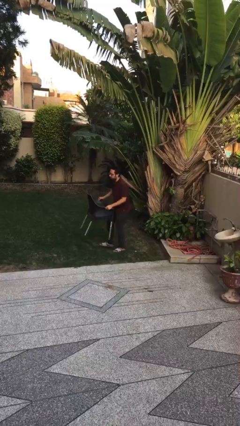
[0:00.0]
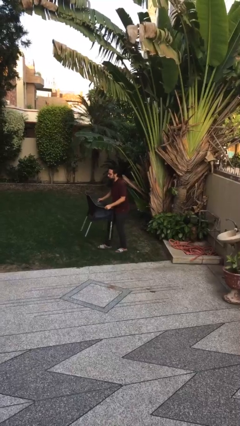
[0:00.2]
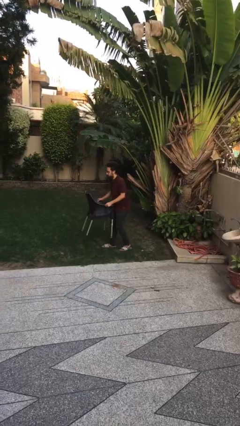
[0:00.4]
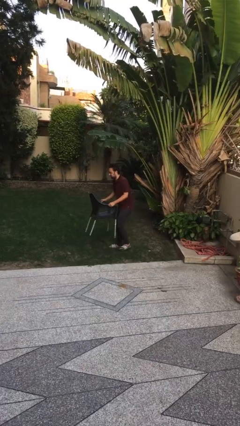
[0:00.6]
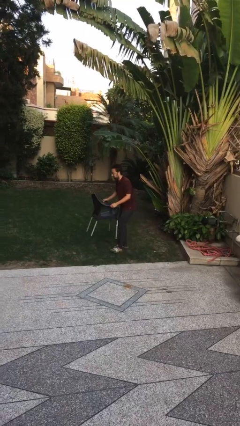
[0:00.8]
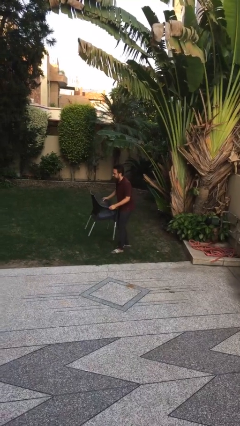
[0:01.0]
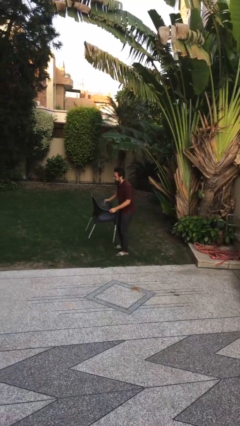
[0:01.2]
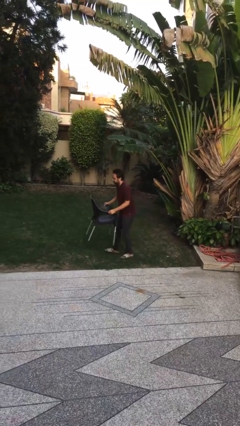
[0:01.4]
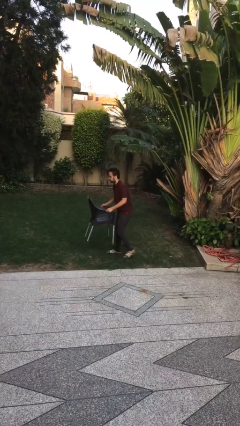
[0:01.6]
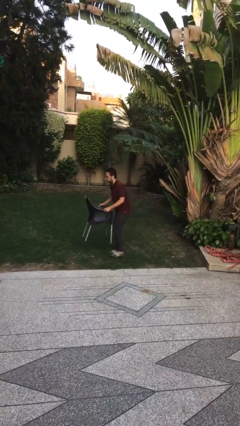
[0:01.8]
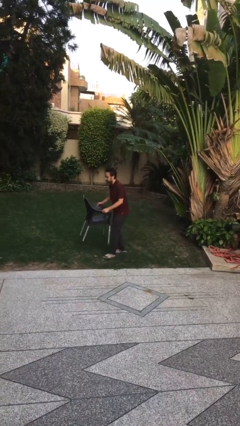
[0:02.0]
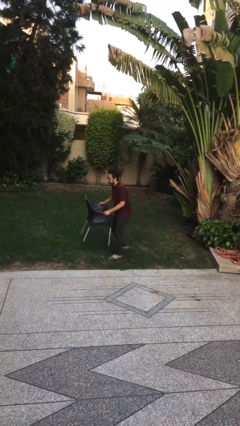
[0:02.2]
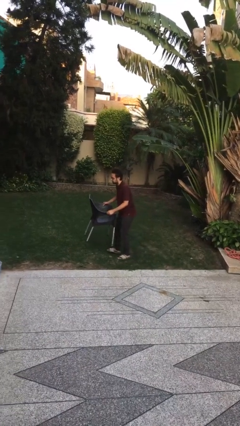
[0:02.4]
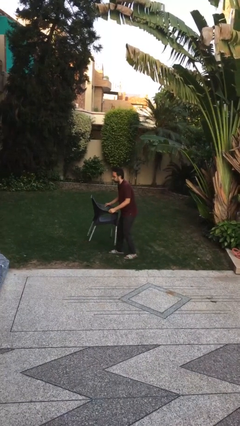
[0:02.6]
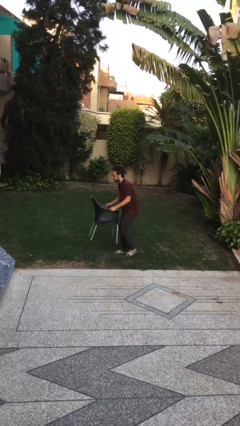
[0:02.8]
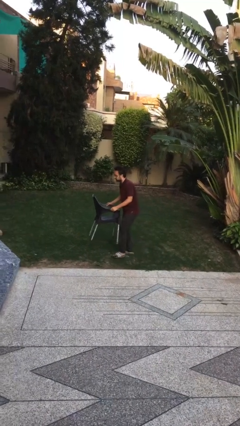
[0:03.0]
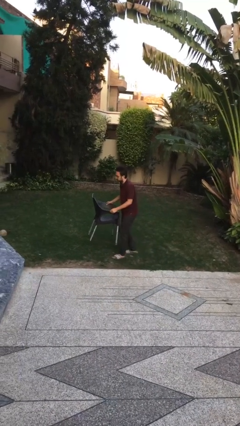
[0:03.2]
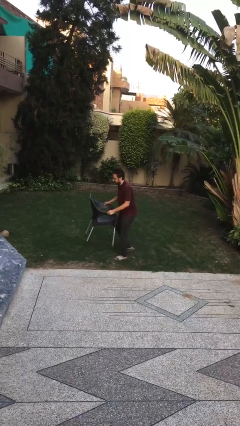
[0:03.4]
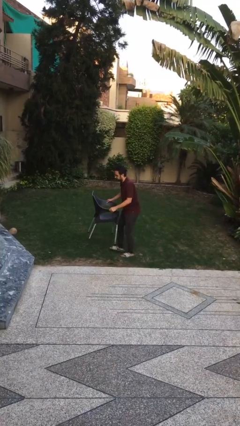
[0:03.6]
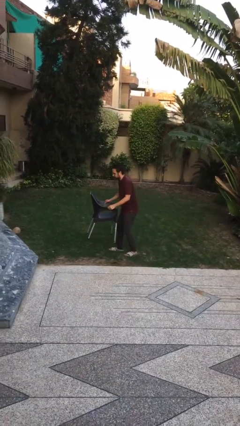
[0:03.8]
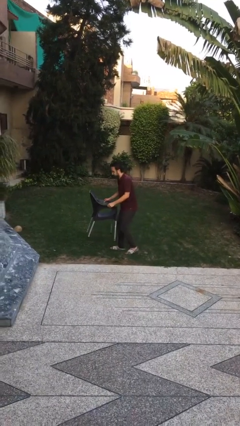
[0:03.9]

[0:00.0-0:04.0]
person carries heavy object

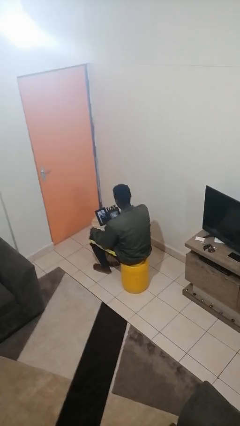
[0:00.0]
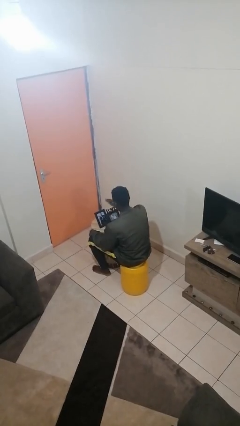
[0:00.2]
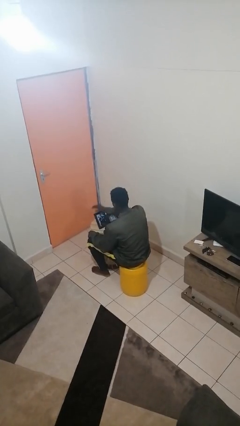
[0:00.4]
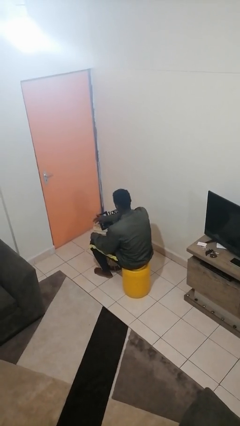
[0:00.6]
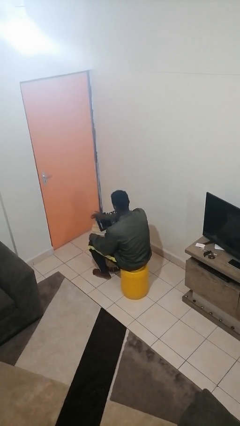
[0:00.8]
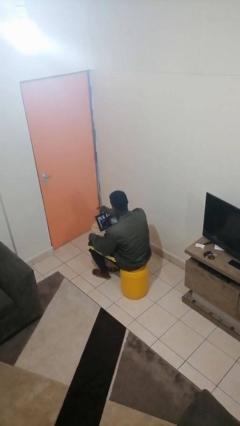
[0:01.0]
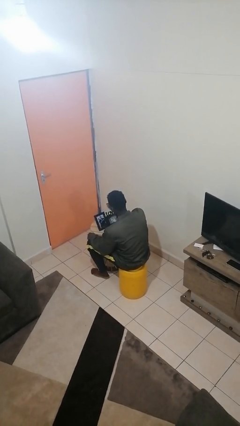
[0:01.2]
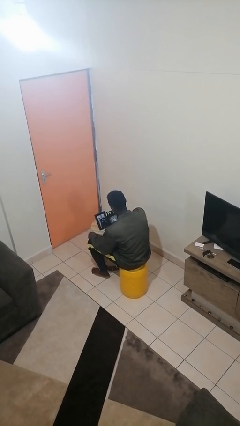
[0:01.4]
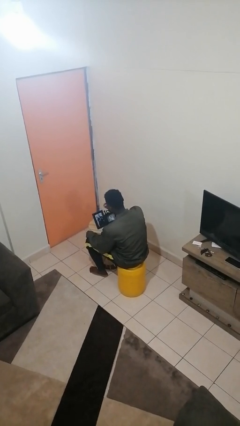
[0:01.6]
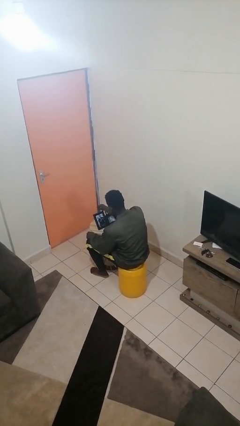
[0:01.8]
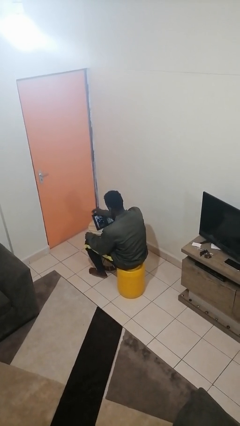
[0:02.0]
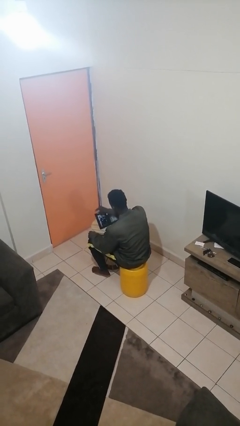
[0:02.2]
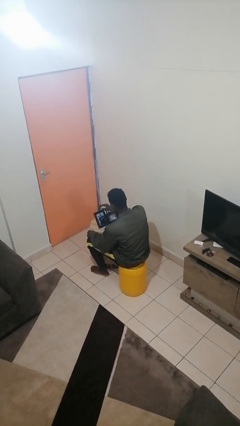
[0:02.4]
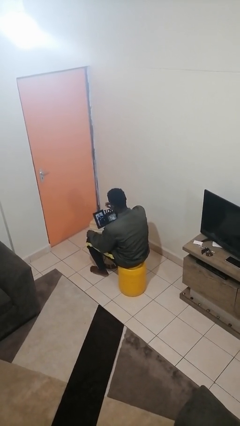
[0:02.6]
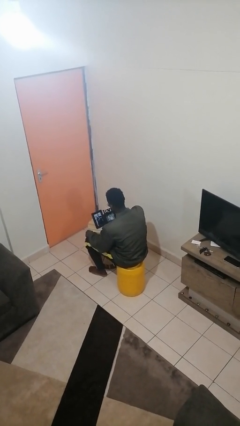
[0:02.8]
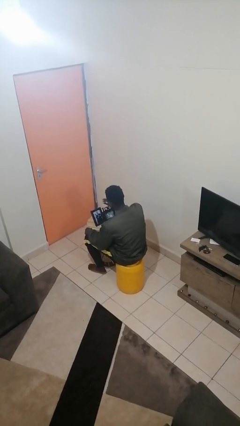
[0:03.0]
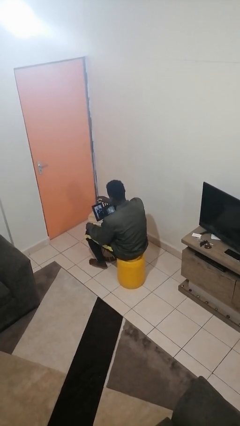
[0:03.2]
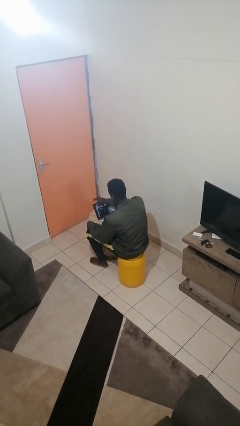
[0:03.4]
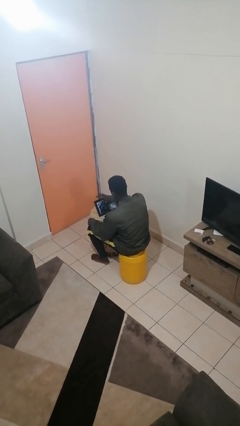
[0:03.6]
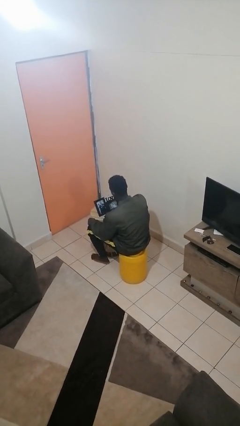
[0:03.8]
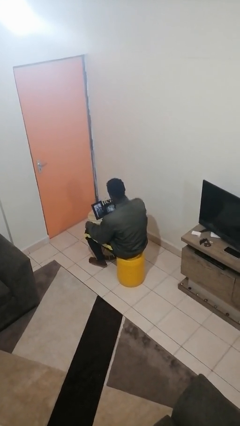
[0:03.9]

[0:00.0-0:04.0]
person waves hand over object

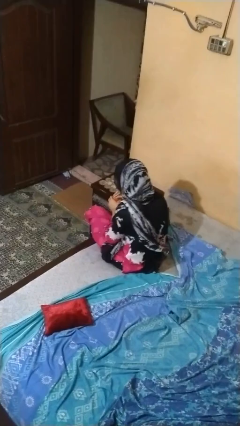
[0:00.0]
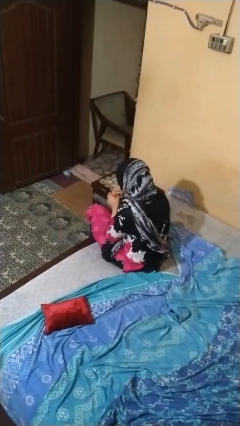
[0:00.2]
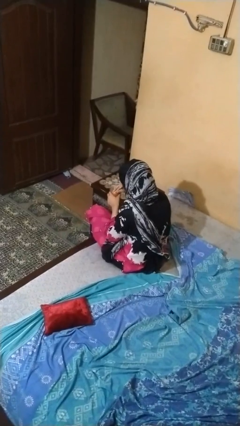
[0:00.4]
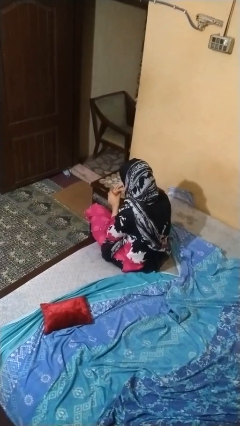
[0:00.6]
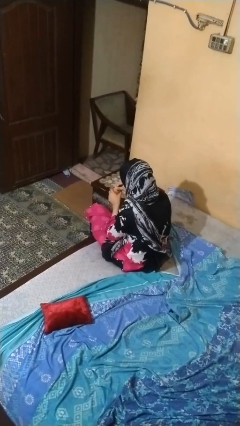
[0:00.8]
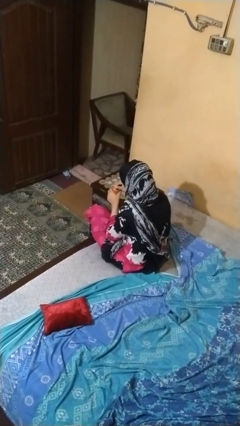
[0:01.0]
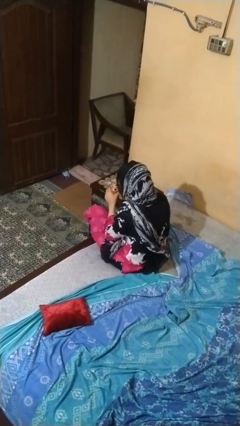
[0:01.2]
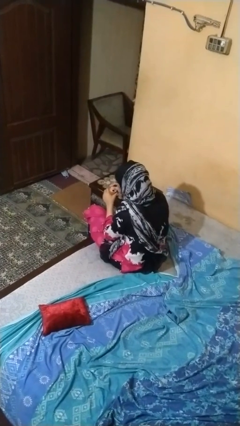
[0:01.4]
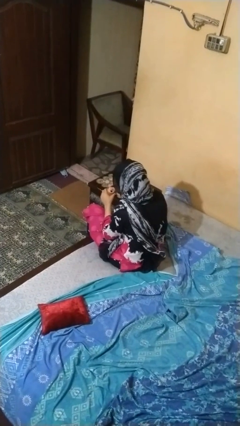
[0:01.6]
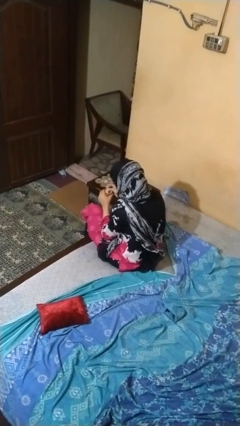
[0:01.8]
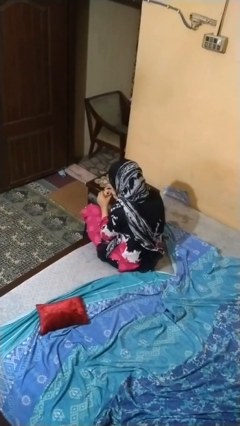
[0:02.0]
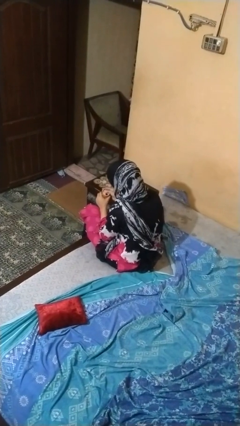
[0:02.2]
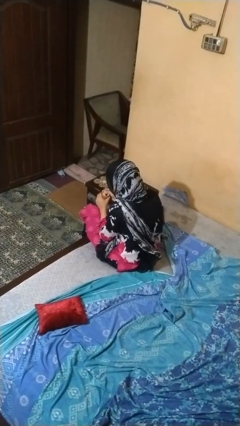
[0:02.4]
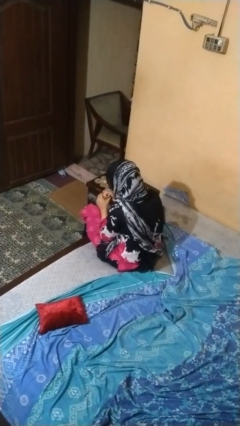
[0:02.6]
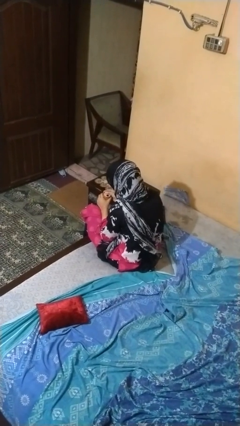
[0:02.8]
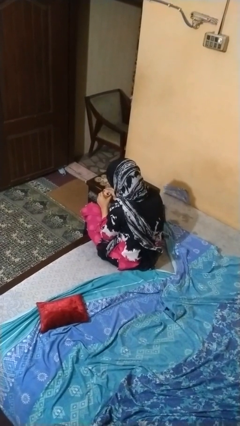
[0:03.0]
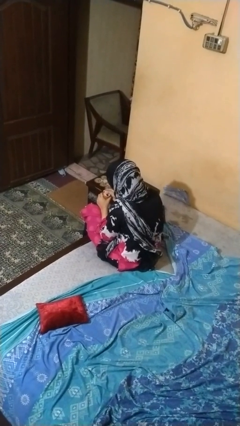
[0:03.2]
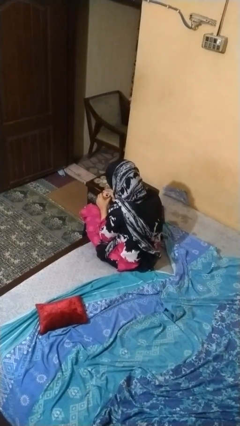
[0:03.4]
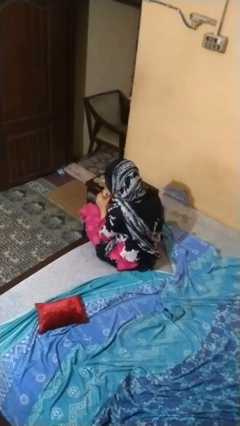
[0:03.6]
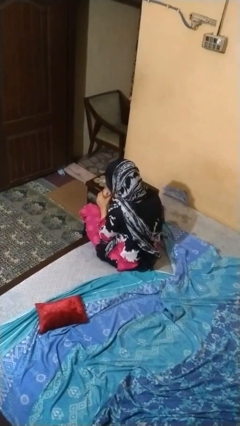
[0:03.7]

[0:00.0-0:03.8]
person opens beverage can

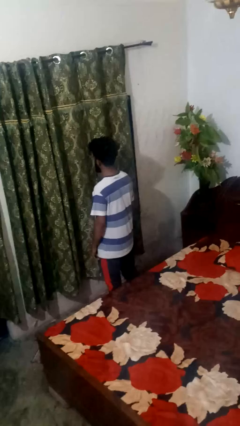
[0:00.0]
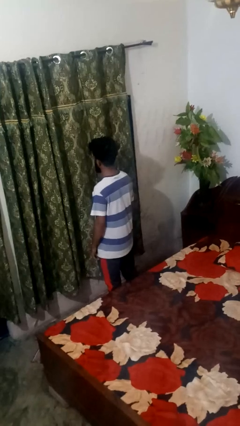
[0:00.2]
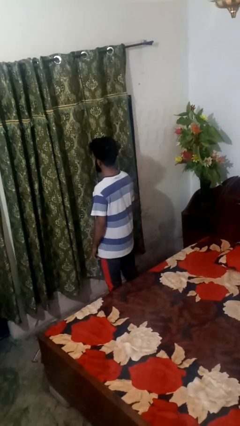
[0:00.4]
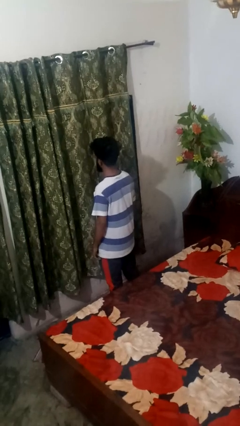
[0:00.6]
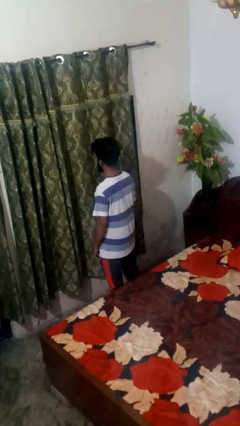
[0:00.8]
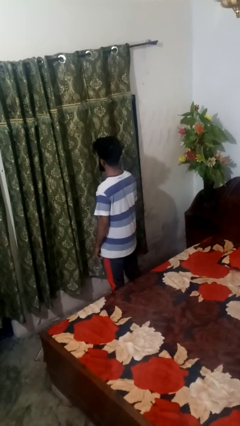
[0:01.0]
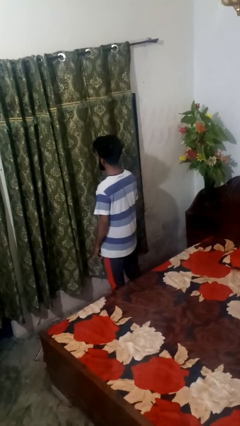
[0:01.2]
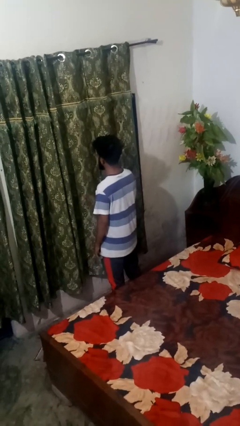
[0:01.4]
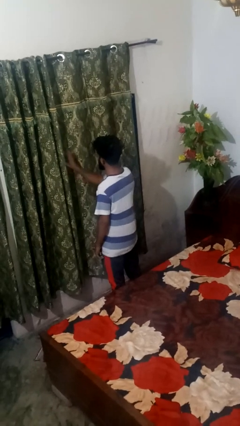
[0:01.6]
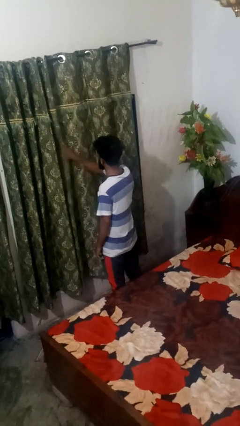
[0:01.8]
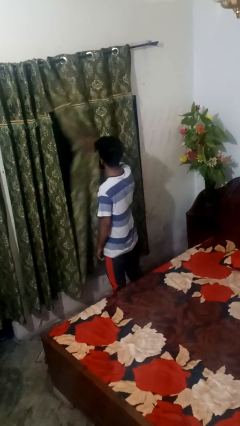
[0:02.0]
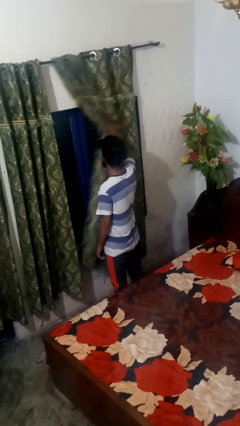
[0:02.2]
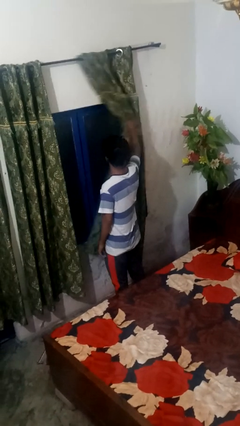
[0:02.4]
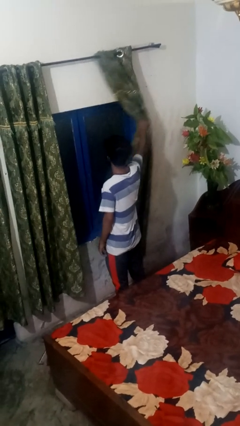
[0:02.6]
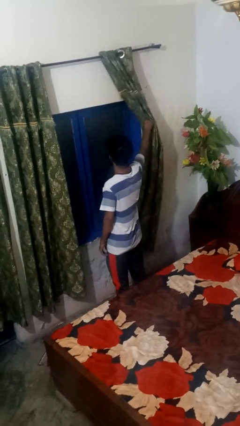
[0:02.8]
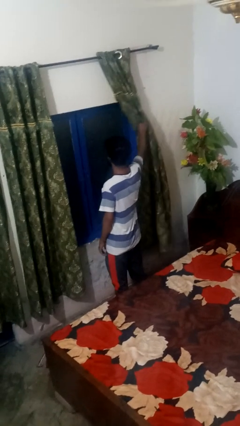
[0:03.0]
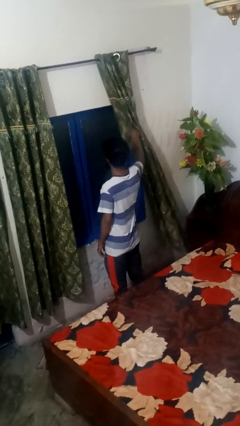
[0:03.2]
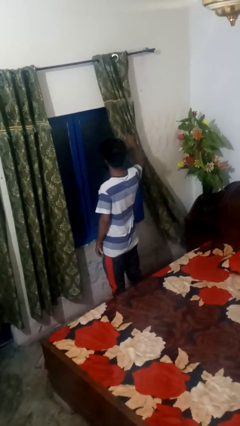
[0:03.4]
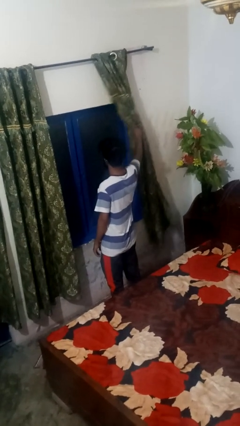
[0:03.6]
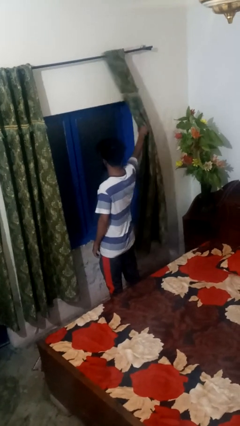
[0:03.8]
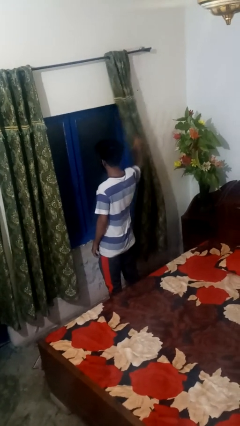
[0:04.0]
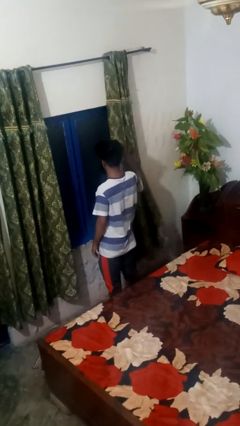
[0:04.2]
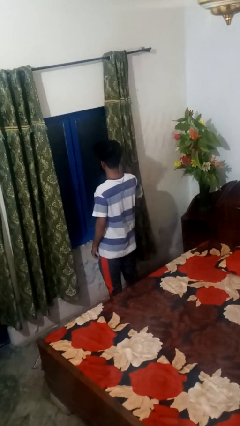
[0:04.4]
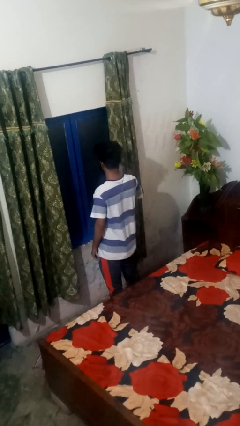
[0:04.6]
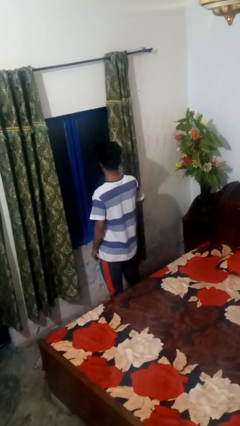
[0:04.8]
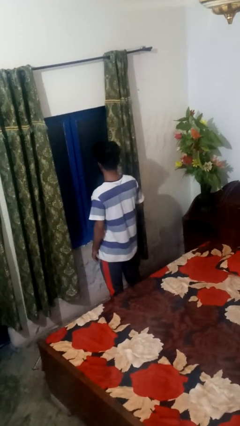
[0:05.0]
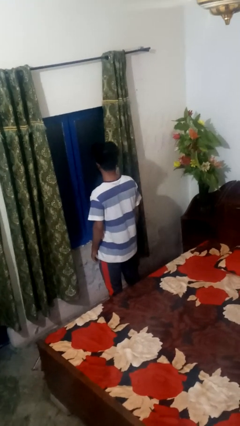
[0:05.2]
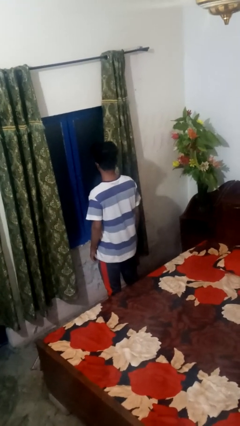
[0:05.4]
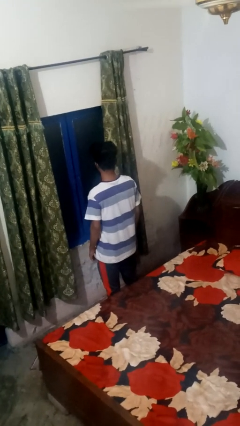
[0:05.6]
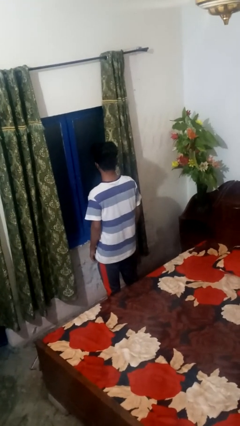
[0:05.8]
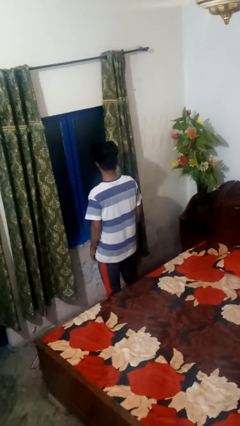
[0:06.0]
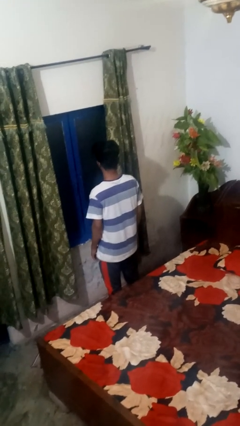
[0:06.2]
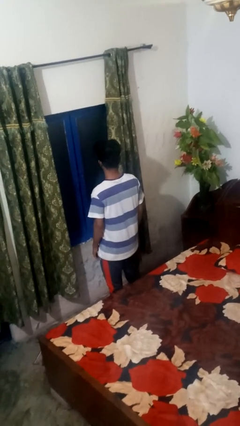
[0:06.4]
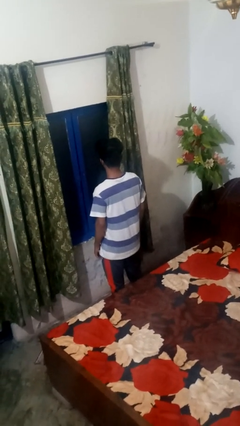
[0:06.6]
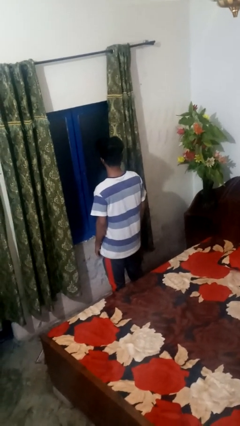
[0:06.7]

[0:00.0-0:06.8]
person opens curtains
